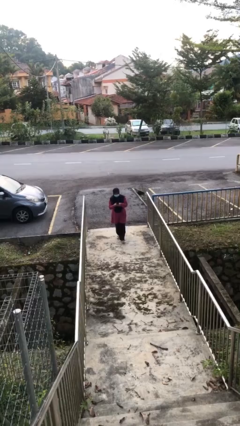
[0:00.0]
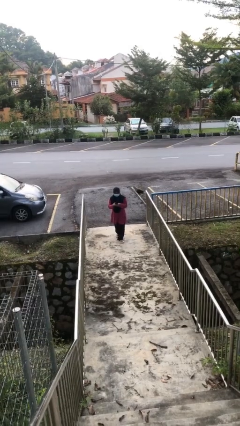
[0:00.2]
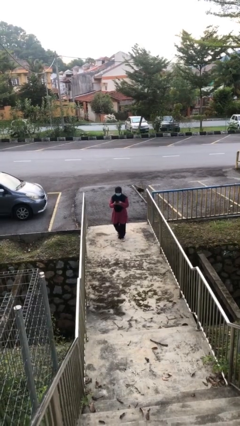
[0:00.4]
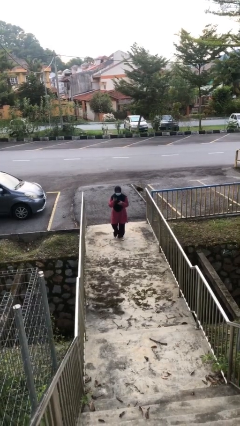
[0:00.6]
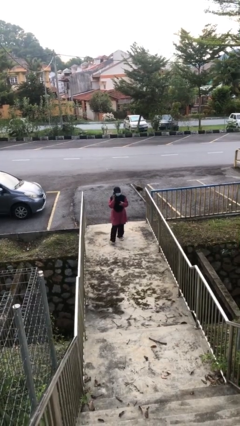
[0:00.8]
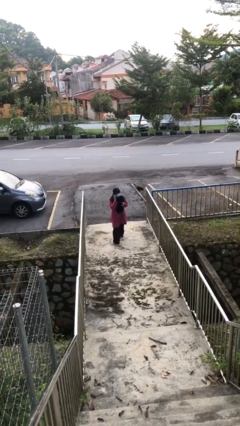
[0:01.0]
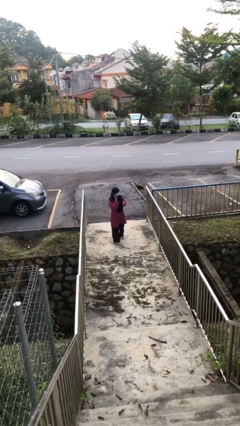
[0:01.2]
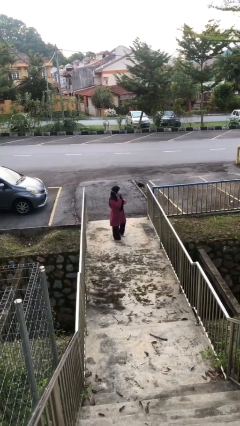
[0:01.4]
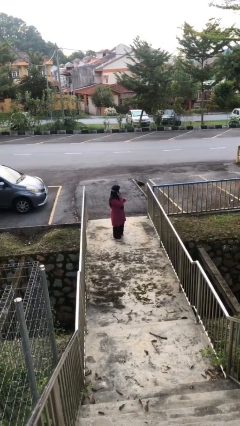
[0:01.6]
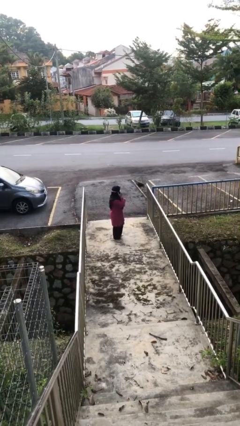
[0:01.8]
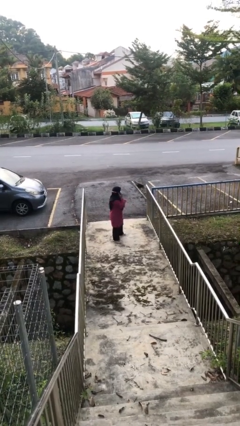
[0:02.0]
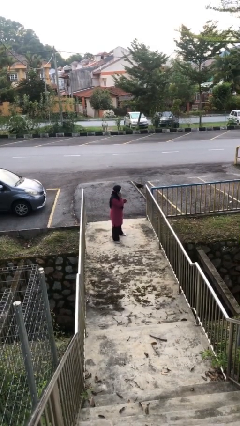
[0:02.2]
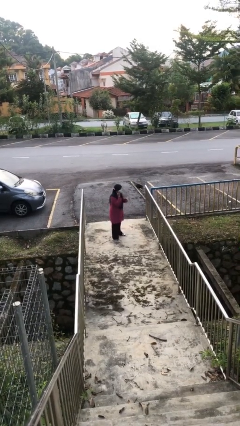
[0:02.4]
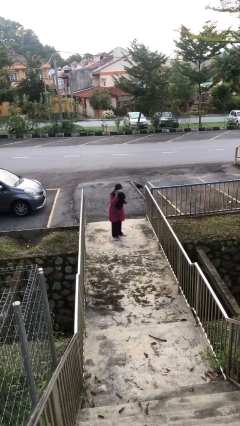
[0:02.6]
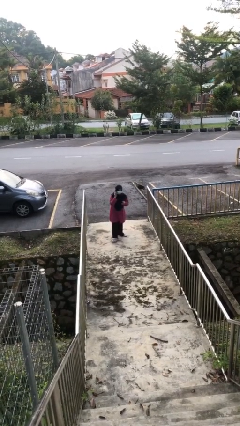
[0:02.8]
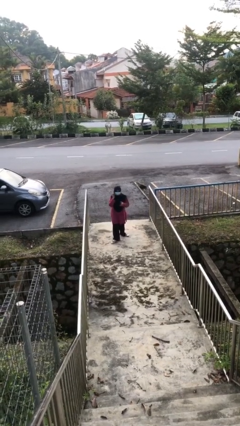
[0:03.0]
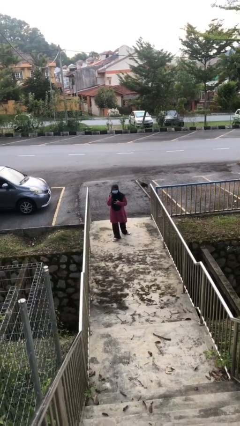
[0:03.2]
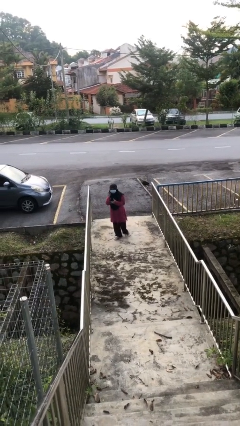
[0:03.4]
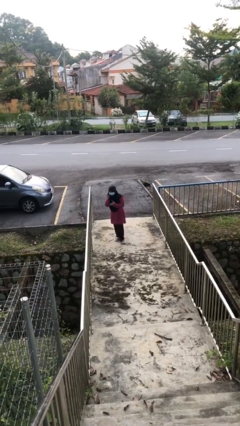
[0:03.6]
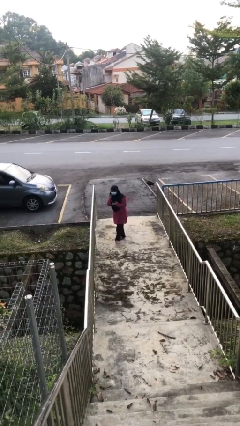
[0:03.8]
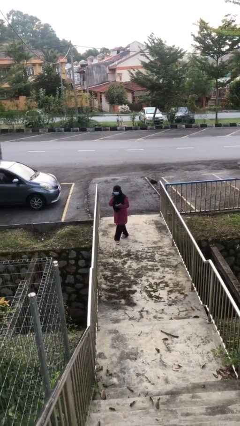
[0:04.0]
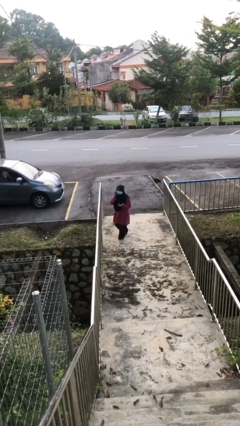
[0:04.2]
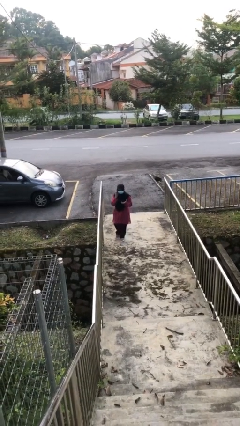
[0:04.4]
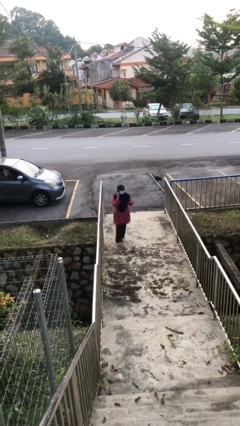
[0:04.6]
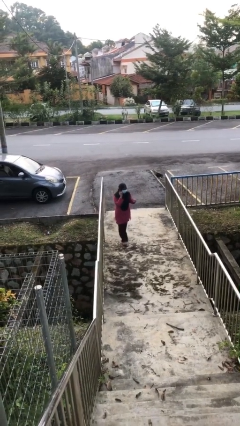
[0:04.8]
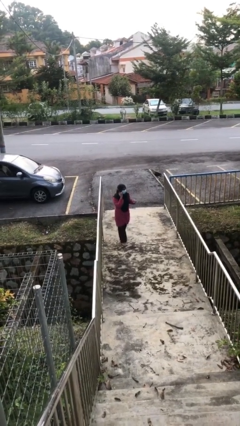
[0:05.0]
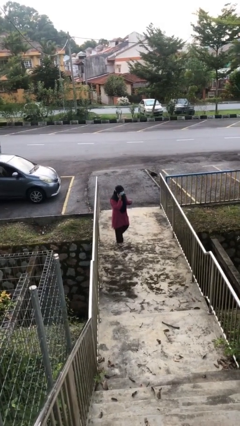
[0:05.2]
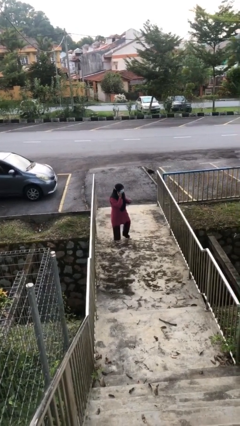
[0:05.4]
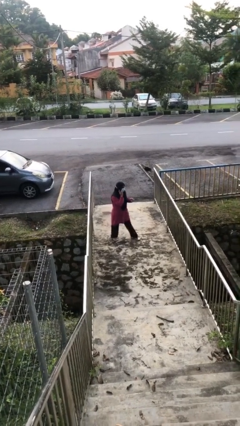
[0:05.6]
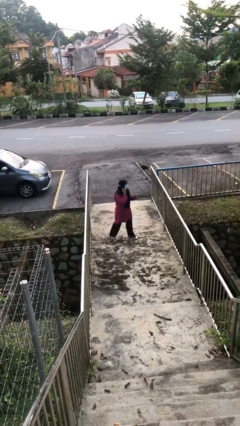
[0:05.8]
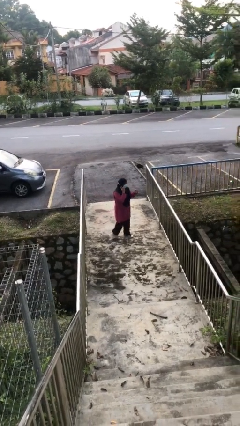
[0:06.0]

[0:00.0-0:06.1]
person talks on phone

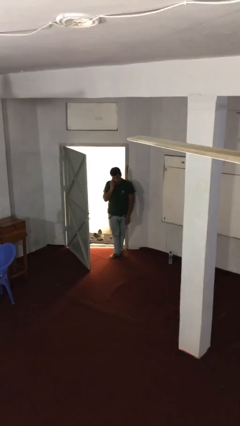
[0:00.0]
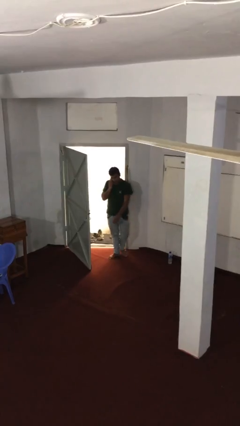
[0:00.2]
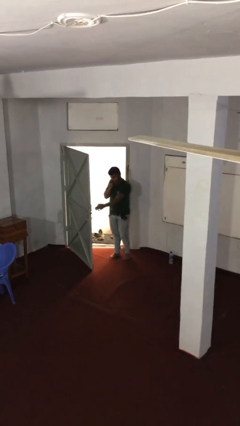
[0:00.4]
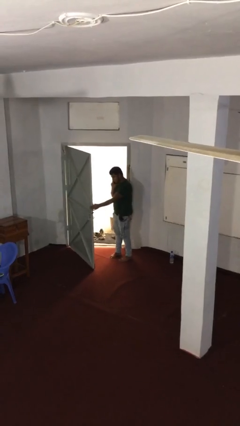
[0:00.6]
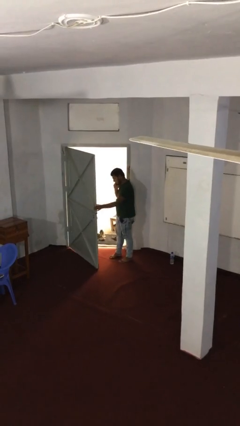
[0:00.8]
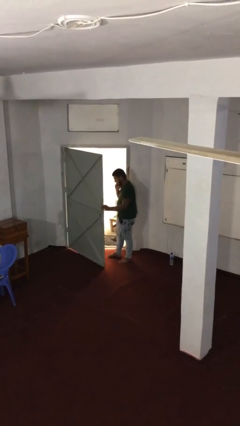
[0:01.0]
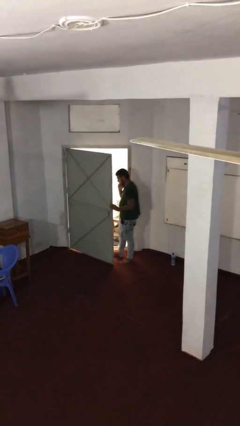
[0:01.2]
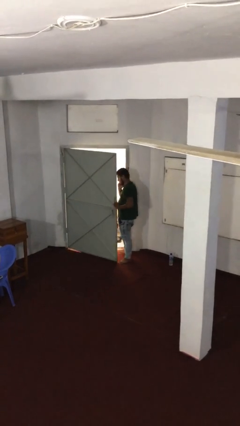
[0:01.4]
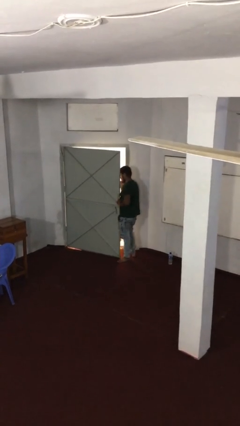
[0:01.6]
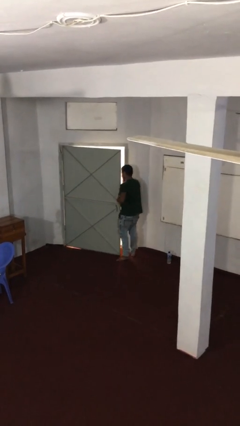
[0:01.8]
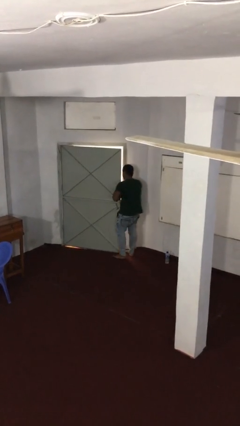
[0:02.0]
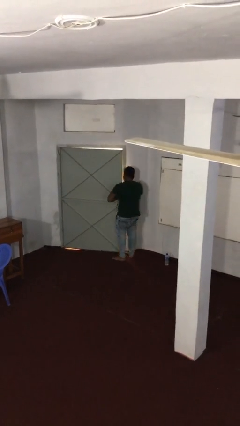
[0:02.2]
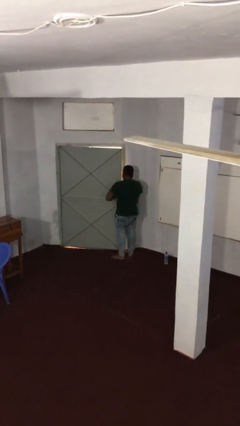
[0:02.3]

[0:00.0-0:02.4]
person closes facility door

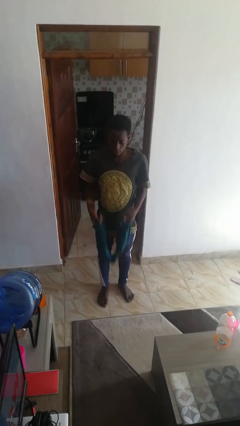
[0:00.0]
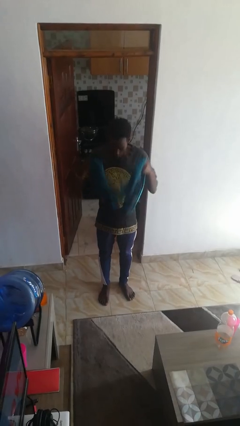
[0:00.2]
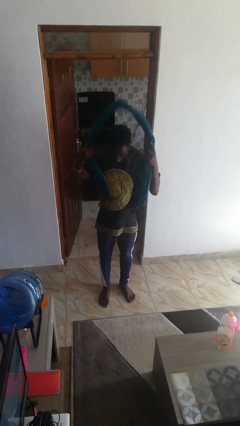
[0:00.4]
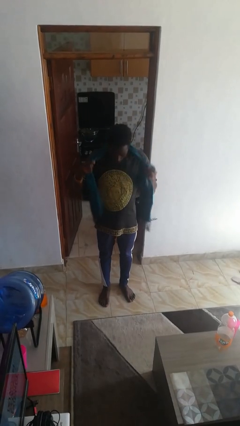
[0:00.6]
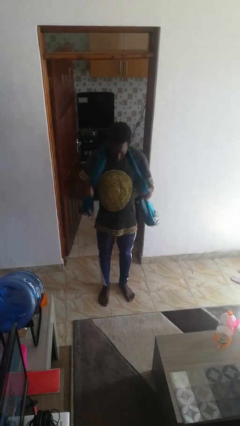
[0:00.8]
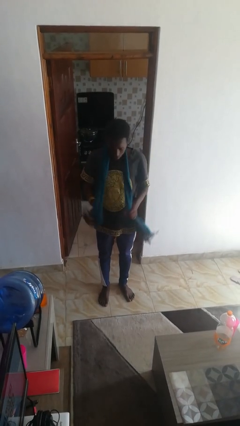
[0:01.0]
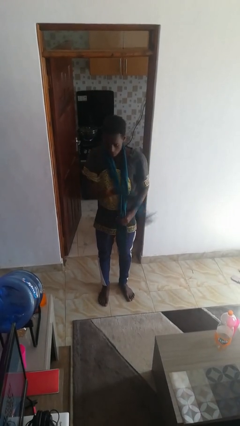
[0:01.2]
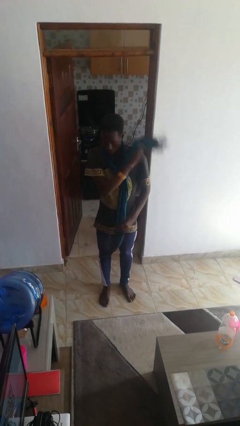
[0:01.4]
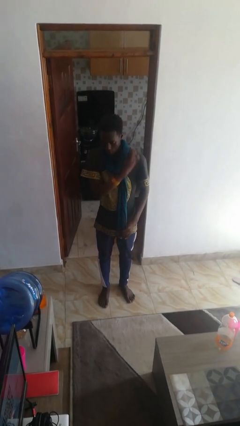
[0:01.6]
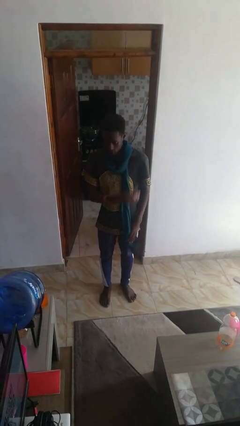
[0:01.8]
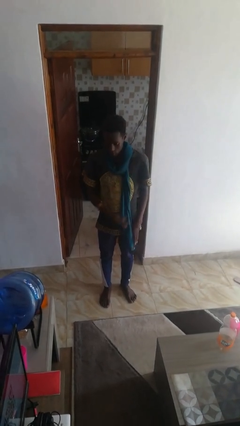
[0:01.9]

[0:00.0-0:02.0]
person puts on scarf

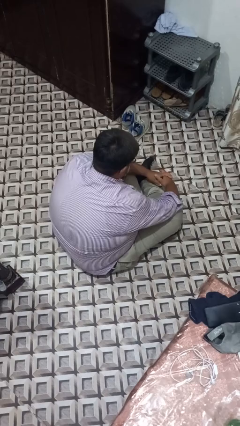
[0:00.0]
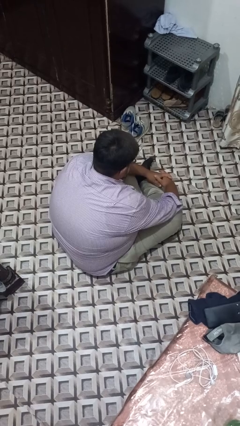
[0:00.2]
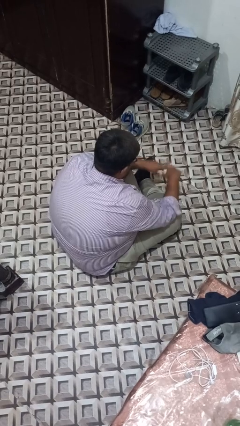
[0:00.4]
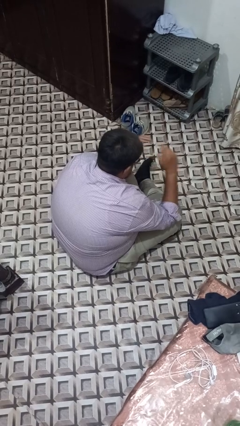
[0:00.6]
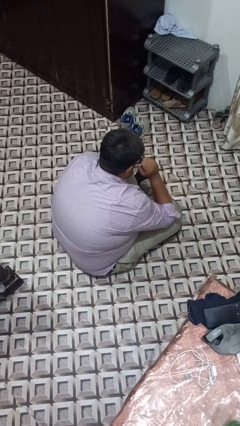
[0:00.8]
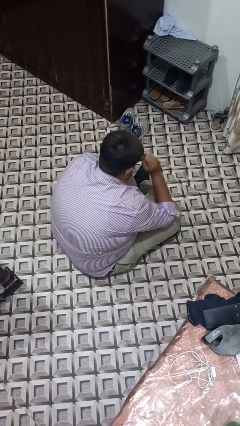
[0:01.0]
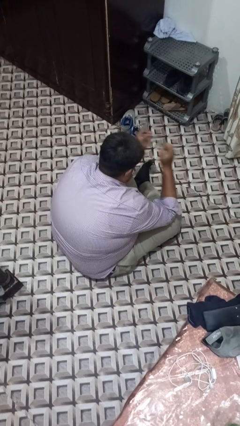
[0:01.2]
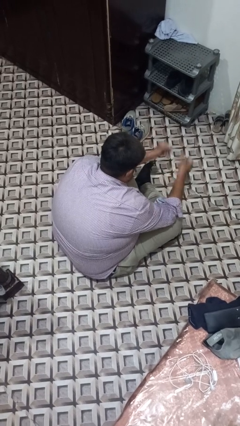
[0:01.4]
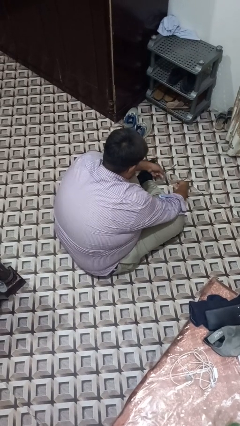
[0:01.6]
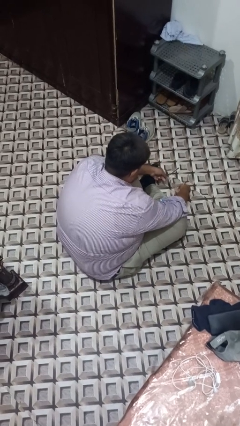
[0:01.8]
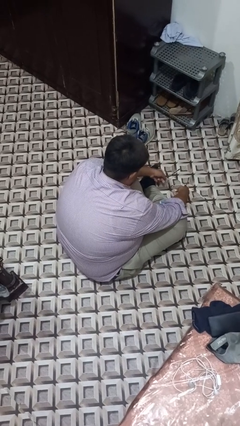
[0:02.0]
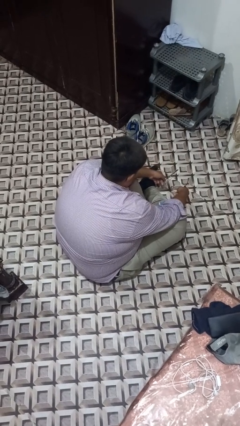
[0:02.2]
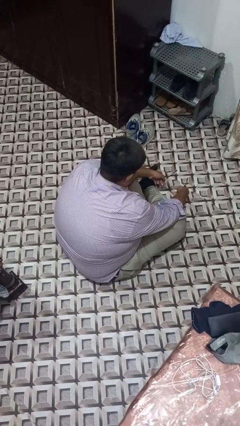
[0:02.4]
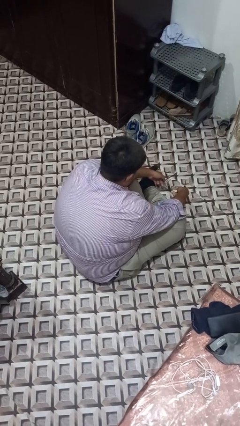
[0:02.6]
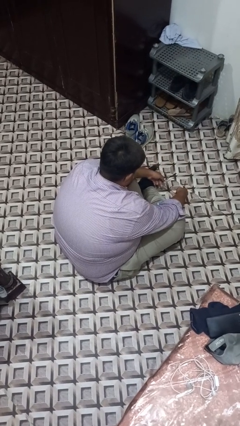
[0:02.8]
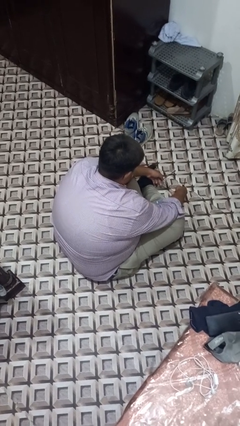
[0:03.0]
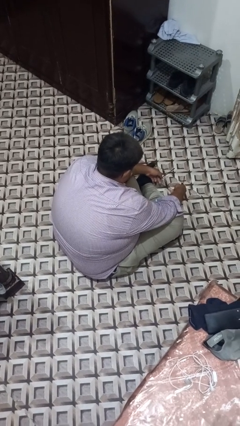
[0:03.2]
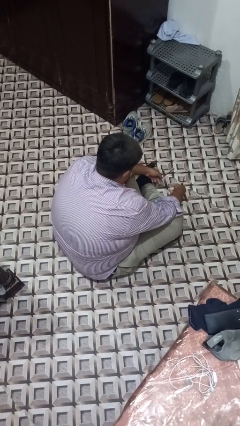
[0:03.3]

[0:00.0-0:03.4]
person takes off glasses

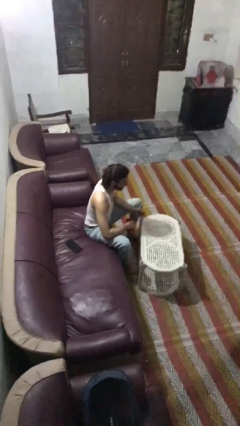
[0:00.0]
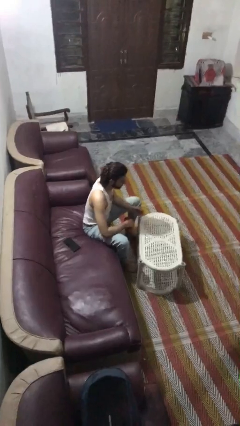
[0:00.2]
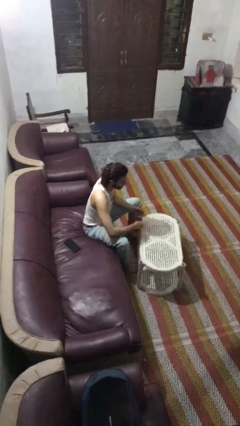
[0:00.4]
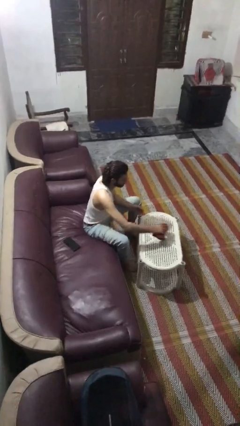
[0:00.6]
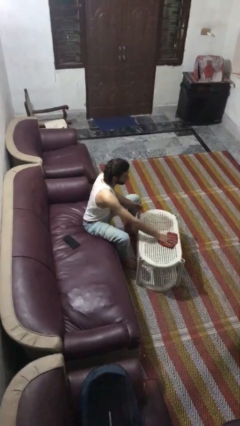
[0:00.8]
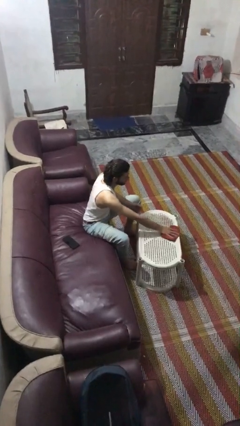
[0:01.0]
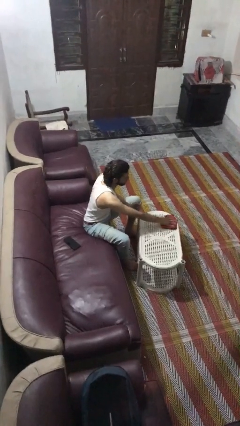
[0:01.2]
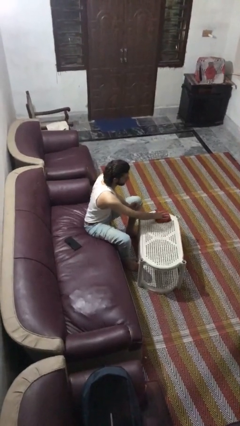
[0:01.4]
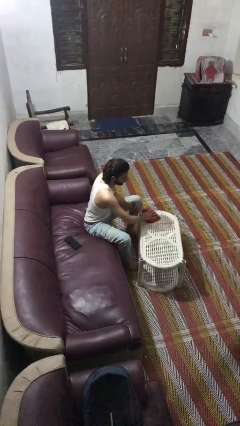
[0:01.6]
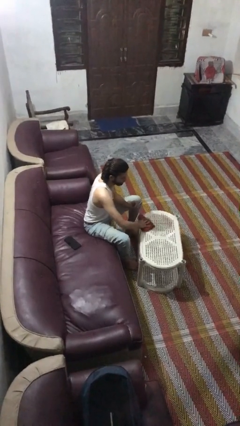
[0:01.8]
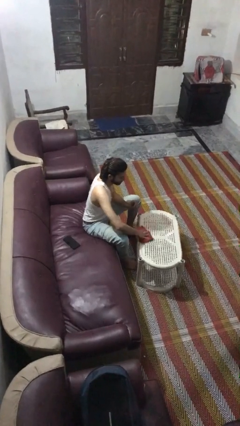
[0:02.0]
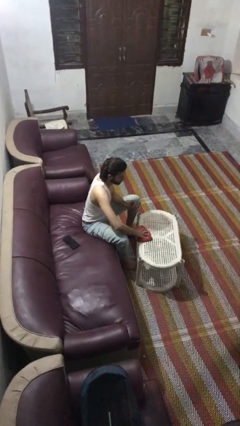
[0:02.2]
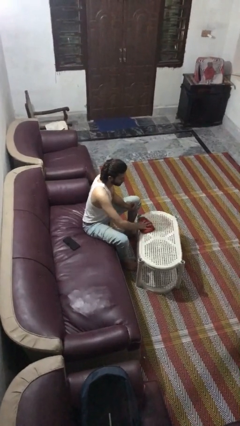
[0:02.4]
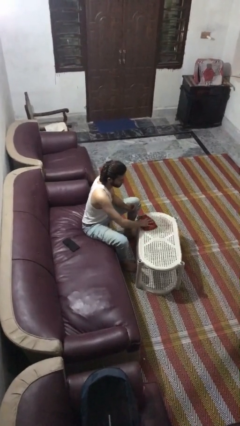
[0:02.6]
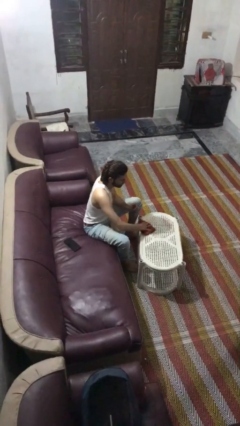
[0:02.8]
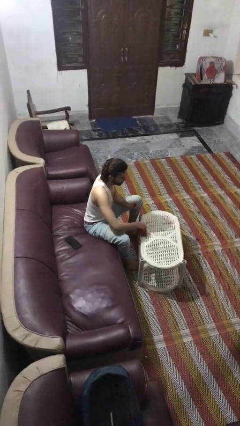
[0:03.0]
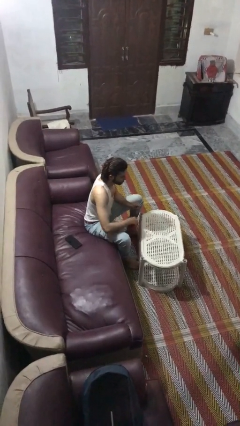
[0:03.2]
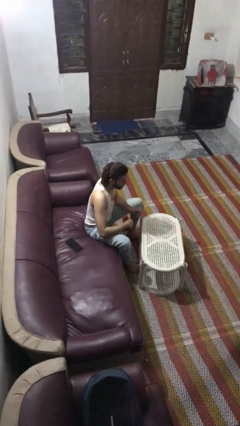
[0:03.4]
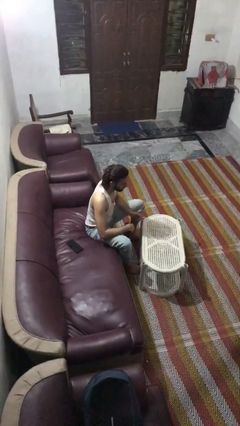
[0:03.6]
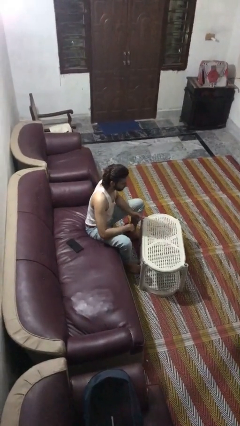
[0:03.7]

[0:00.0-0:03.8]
person cleans table with rag
